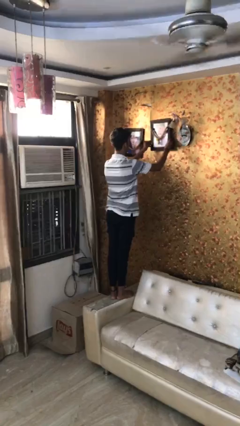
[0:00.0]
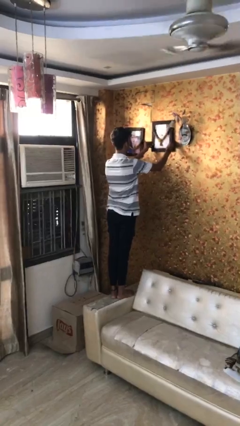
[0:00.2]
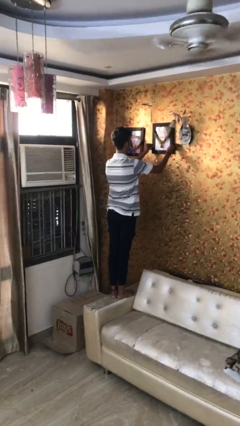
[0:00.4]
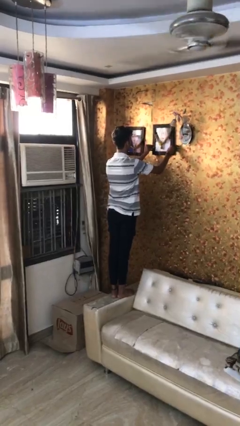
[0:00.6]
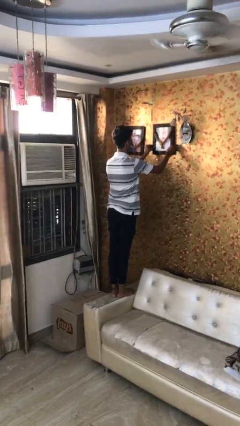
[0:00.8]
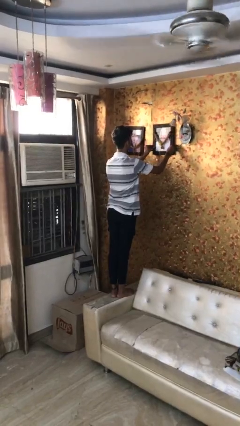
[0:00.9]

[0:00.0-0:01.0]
person puts up picture frame

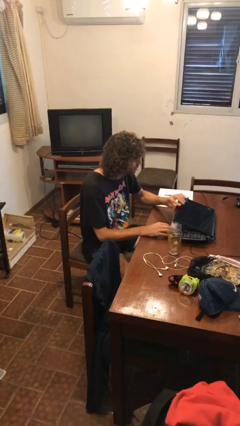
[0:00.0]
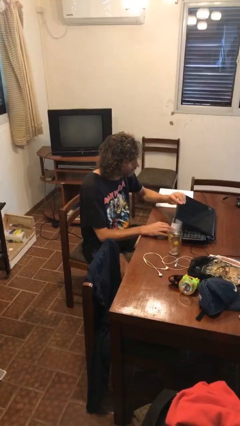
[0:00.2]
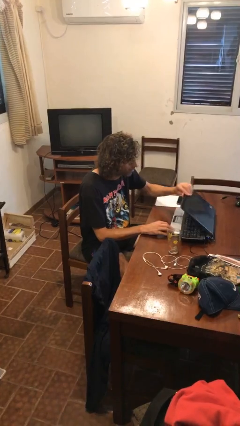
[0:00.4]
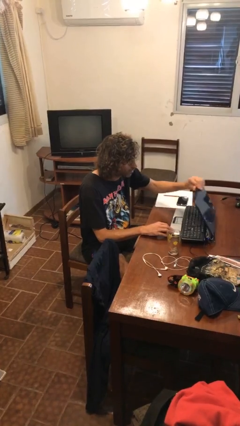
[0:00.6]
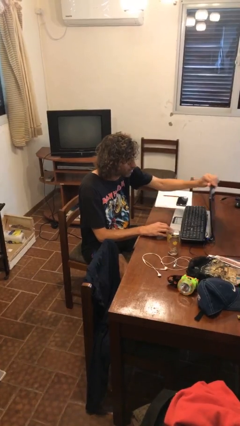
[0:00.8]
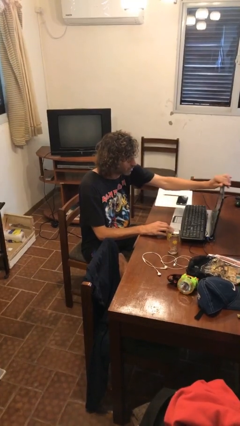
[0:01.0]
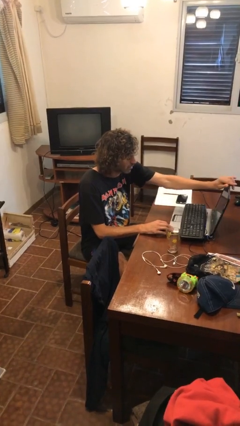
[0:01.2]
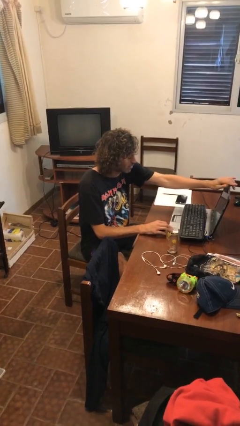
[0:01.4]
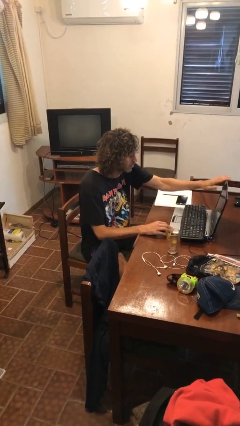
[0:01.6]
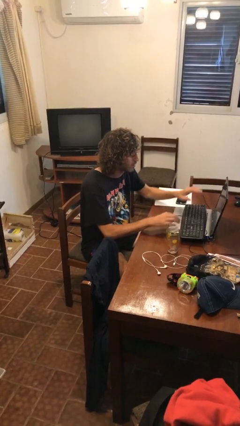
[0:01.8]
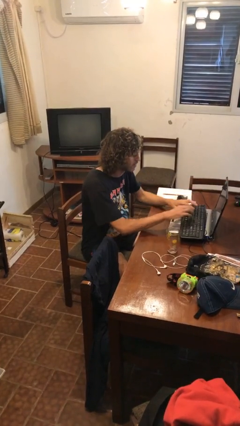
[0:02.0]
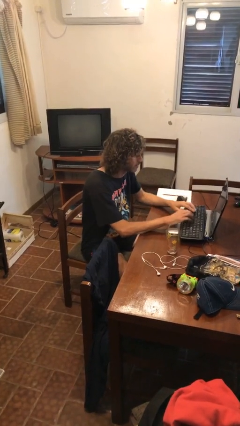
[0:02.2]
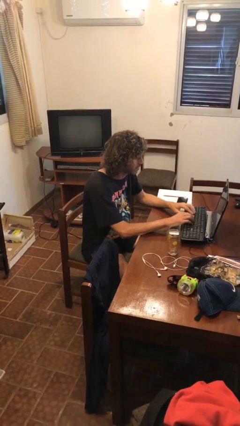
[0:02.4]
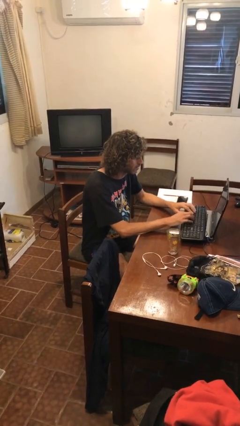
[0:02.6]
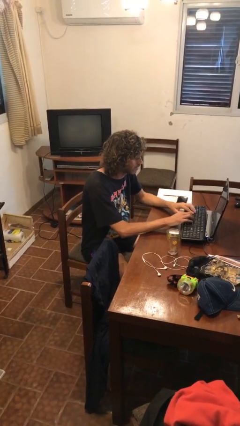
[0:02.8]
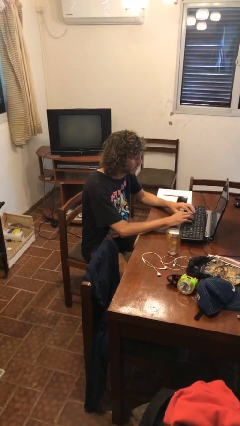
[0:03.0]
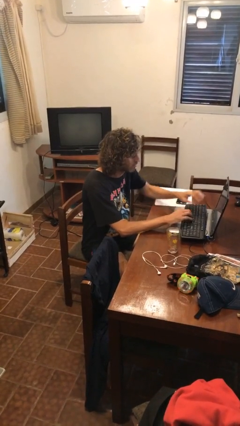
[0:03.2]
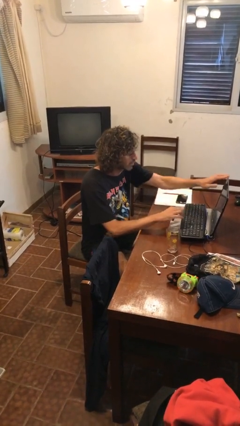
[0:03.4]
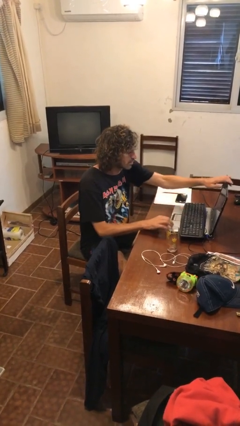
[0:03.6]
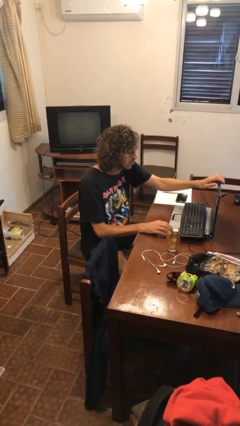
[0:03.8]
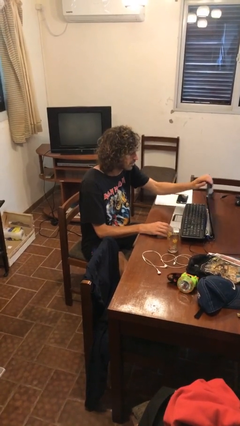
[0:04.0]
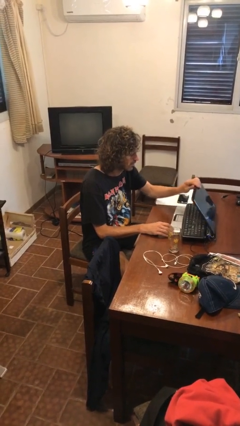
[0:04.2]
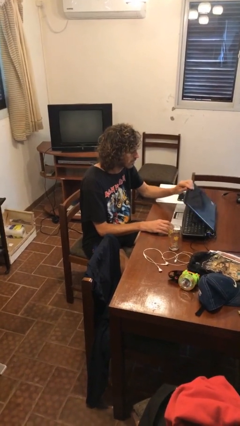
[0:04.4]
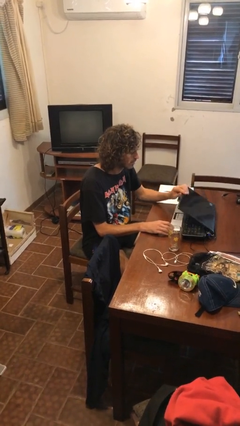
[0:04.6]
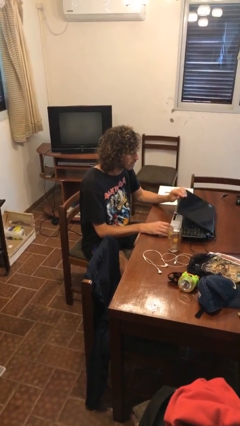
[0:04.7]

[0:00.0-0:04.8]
person interacts with laptop

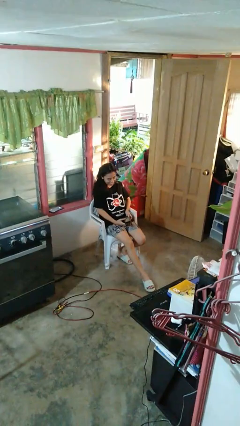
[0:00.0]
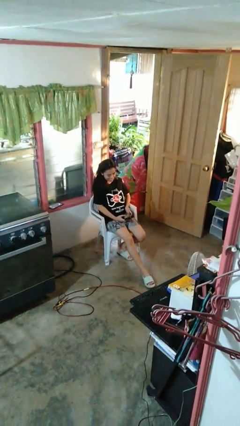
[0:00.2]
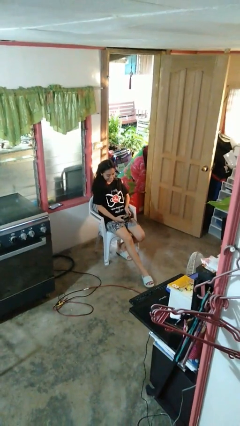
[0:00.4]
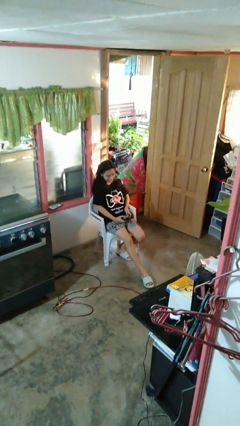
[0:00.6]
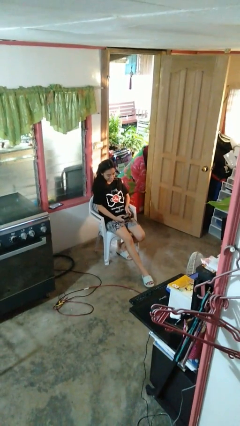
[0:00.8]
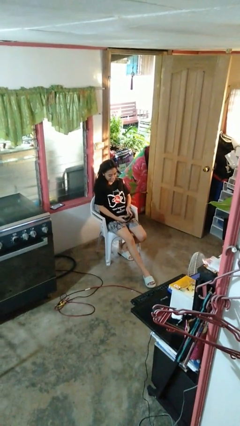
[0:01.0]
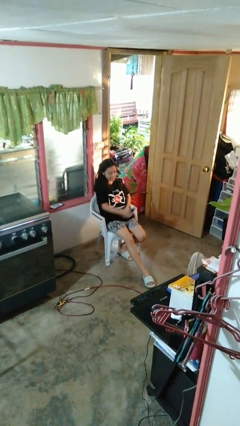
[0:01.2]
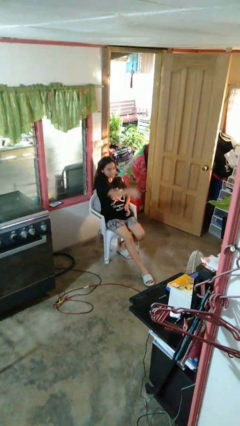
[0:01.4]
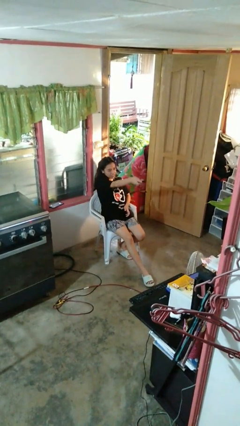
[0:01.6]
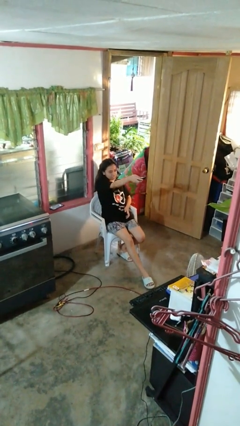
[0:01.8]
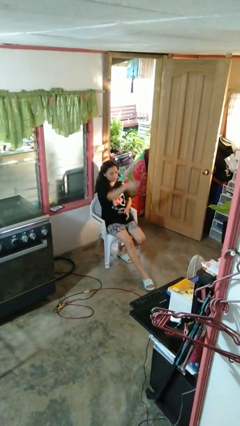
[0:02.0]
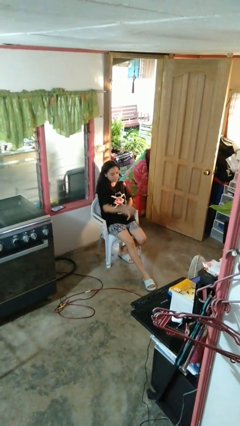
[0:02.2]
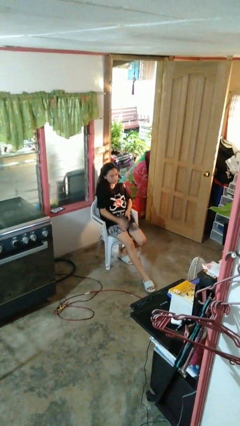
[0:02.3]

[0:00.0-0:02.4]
person uses television remote

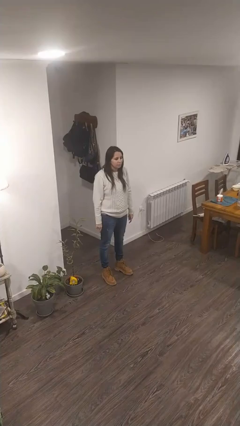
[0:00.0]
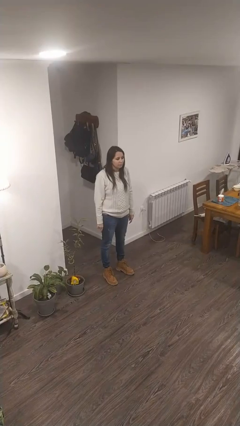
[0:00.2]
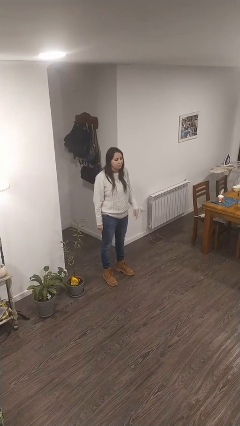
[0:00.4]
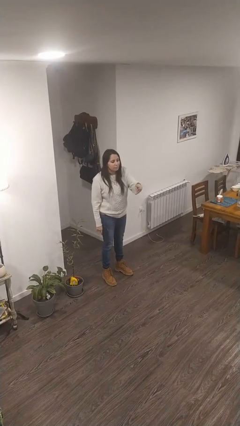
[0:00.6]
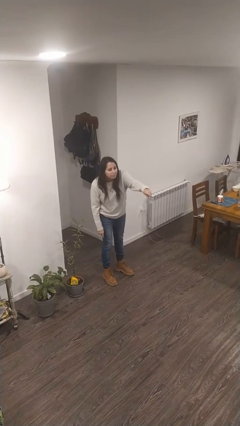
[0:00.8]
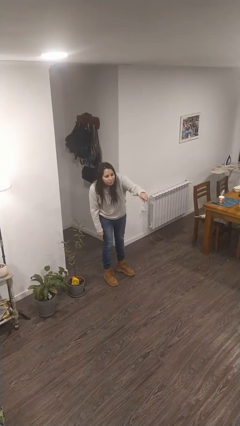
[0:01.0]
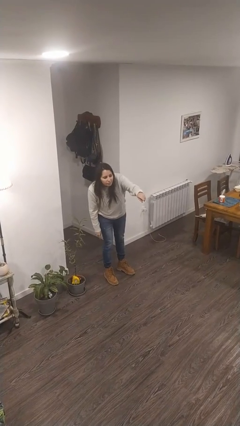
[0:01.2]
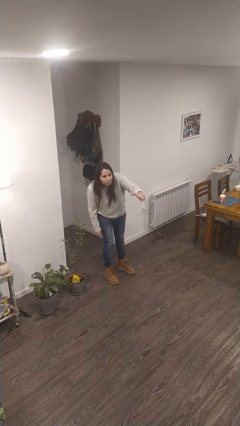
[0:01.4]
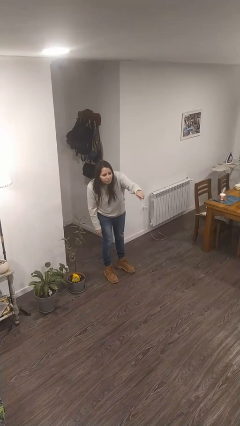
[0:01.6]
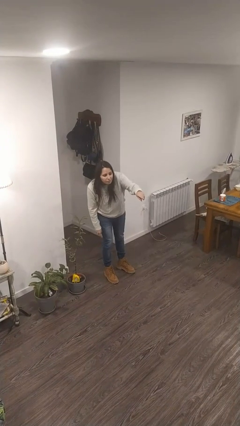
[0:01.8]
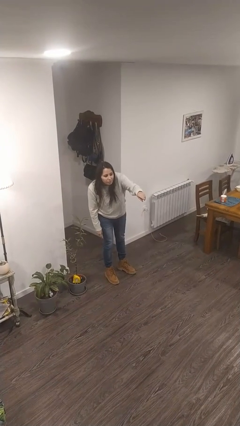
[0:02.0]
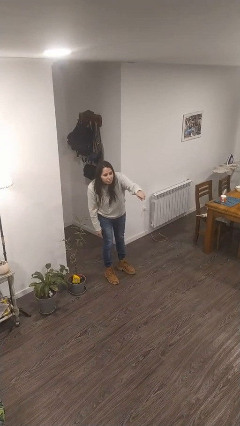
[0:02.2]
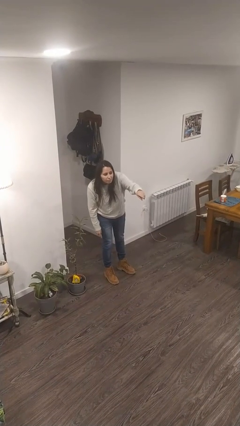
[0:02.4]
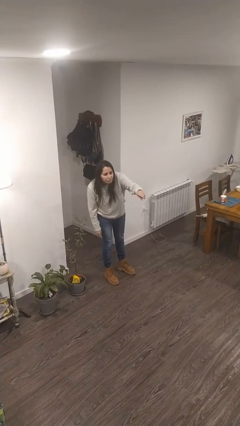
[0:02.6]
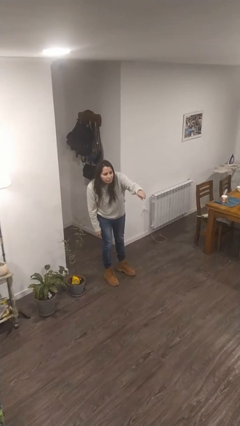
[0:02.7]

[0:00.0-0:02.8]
person points at person

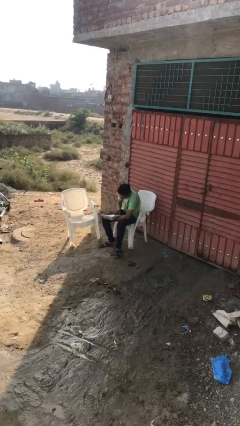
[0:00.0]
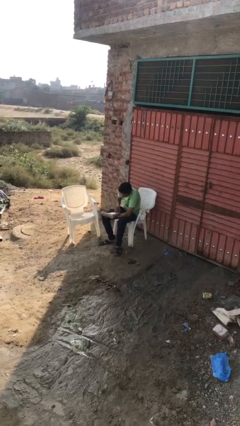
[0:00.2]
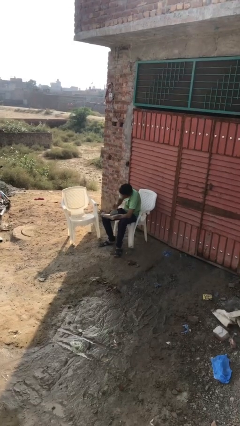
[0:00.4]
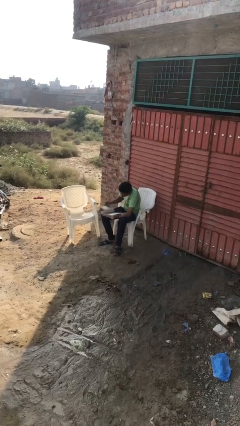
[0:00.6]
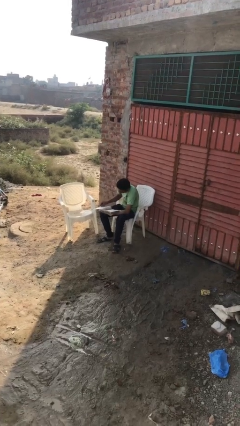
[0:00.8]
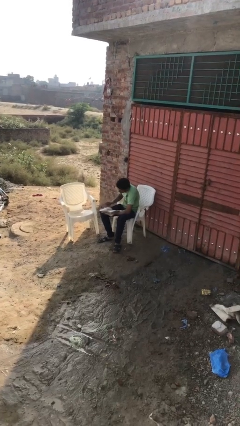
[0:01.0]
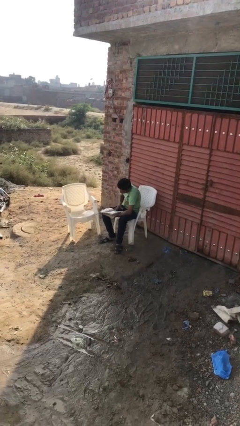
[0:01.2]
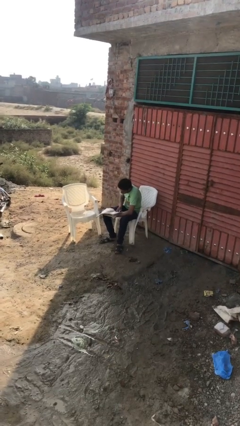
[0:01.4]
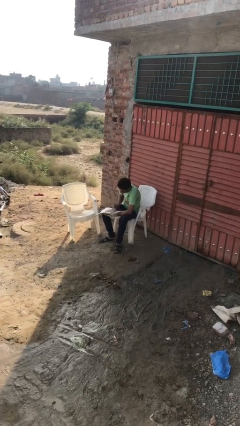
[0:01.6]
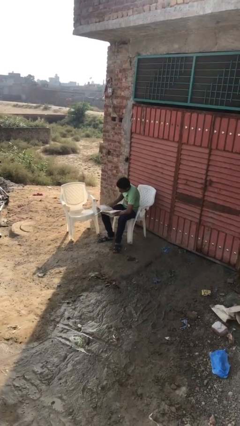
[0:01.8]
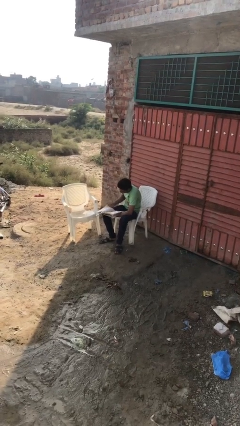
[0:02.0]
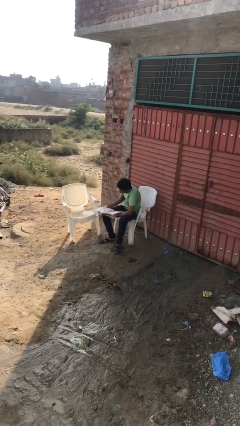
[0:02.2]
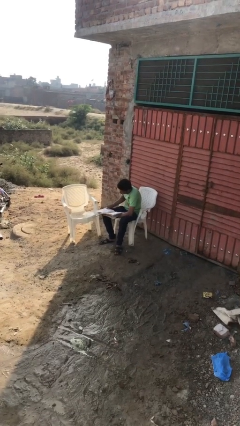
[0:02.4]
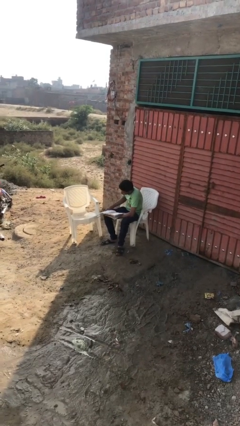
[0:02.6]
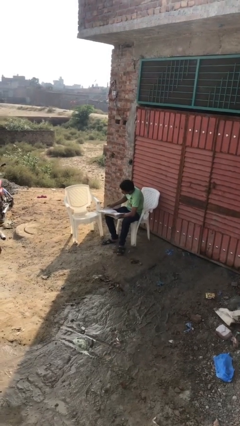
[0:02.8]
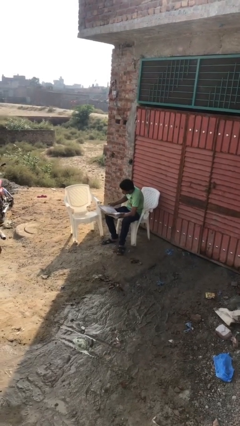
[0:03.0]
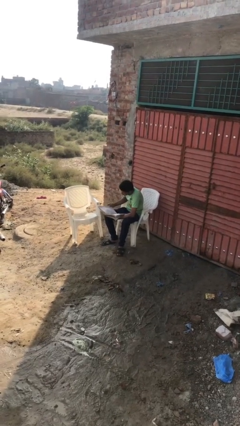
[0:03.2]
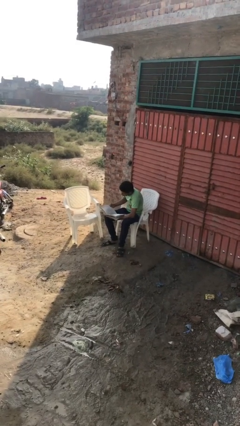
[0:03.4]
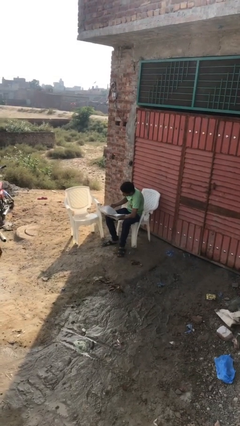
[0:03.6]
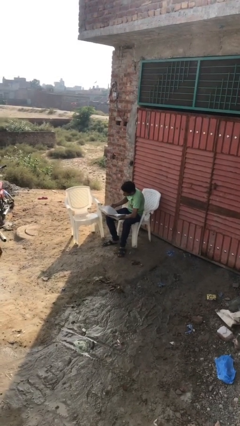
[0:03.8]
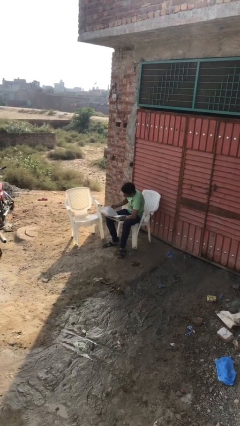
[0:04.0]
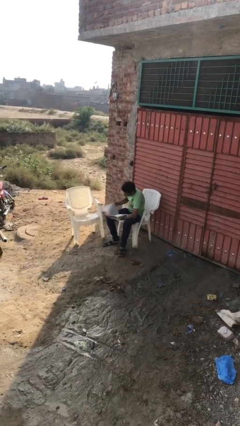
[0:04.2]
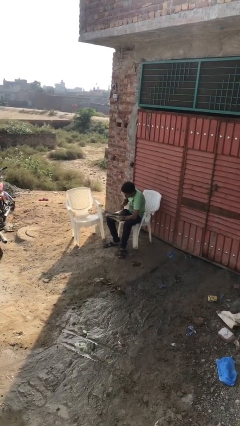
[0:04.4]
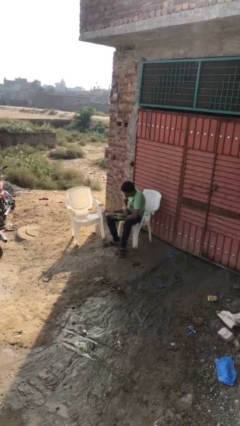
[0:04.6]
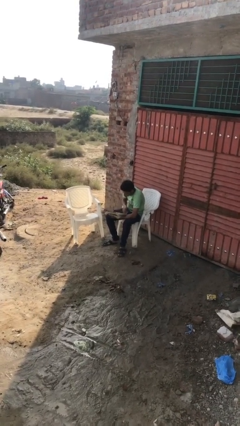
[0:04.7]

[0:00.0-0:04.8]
person reads document

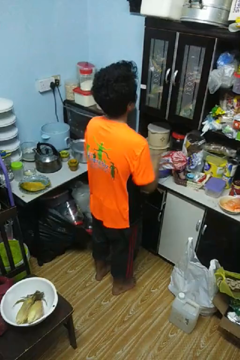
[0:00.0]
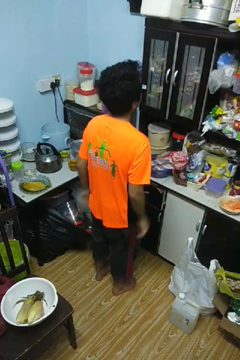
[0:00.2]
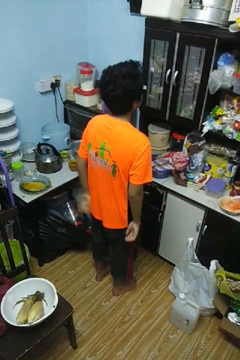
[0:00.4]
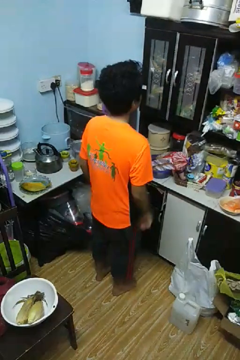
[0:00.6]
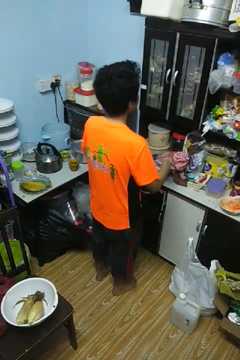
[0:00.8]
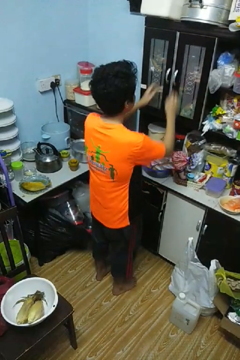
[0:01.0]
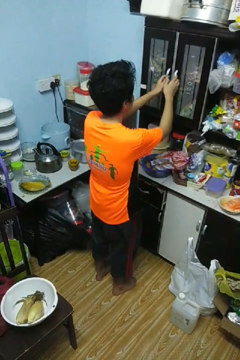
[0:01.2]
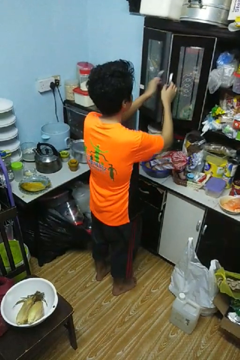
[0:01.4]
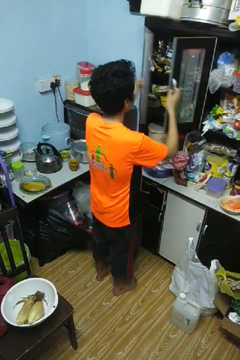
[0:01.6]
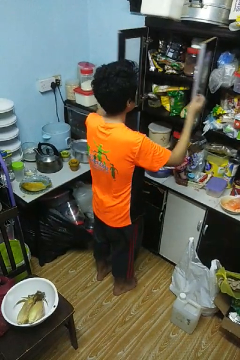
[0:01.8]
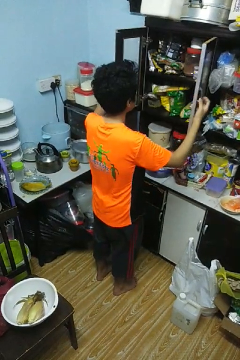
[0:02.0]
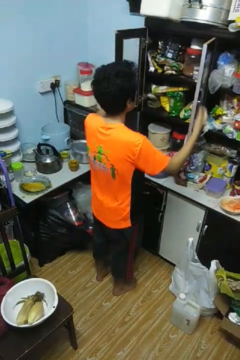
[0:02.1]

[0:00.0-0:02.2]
person opens cabinet
